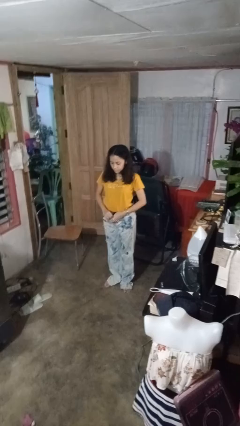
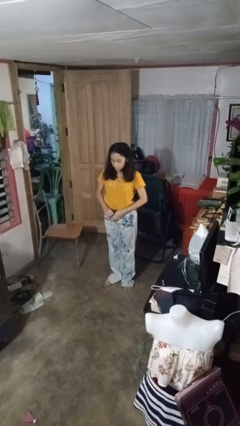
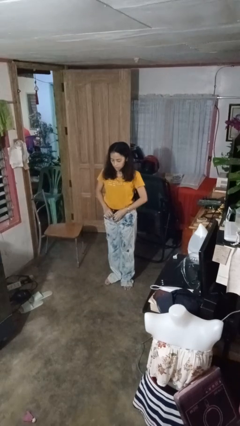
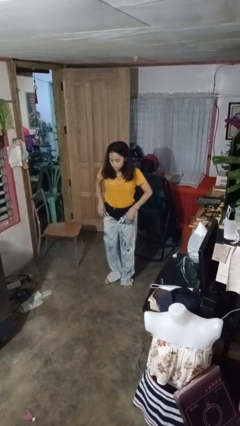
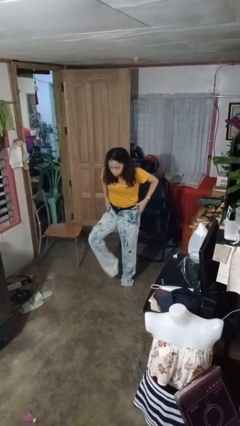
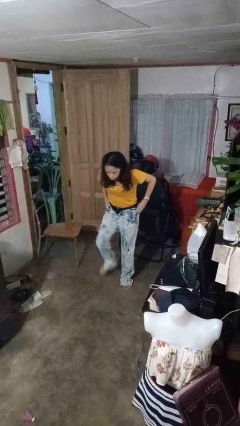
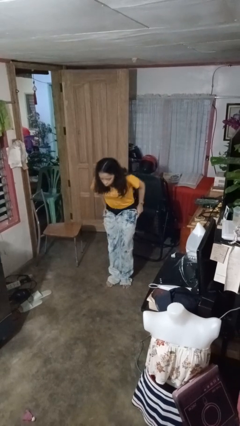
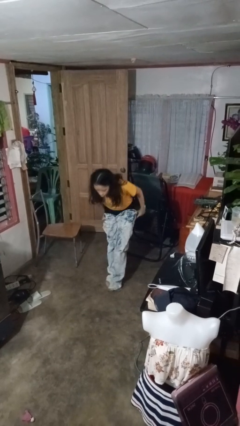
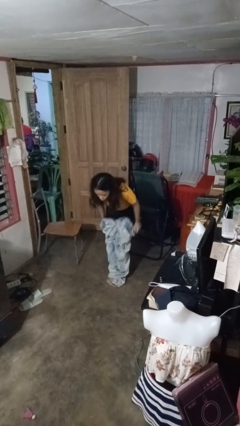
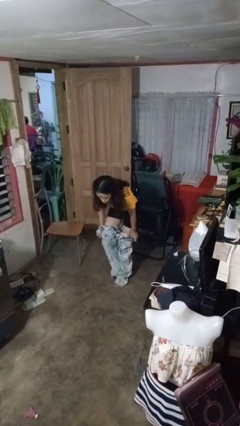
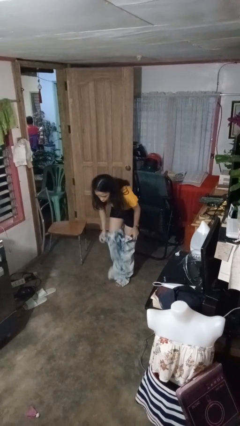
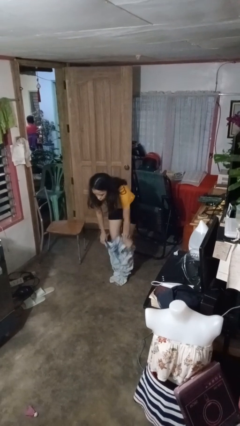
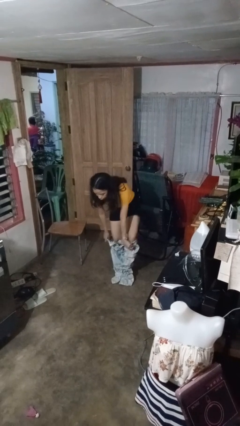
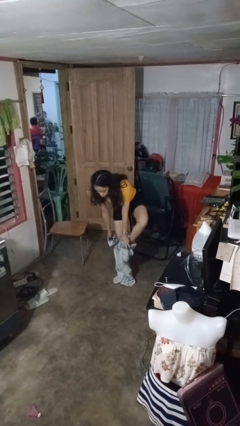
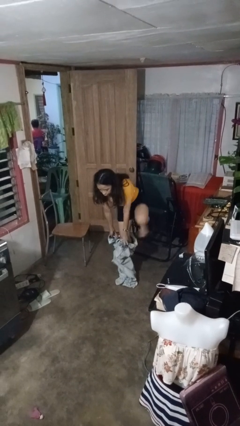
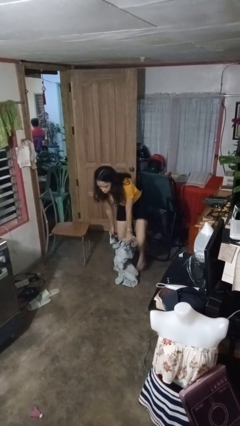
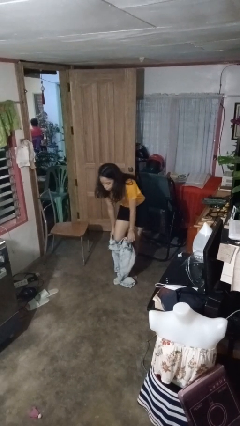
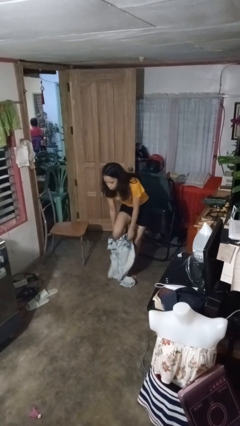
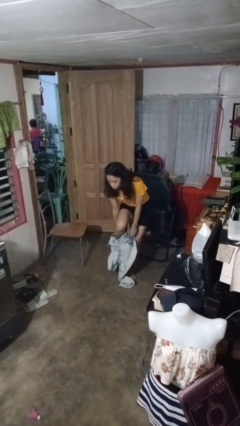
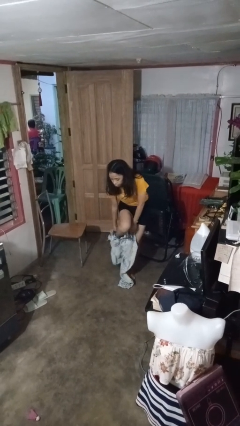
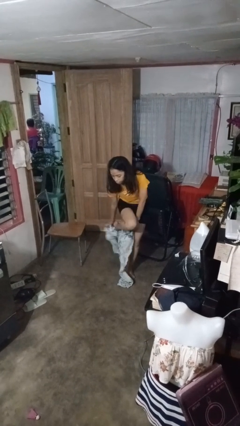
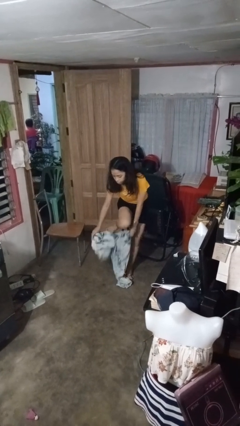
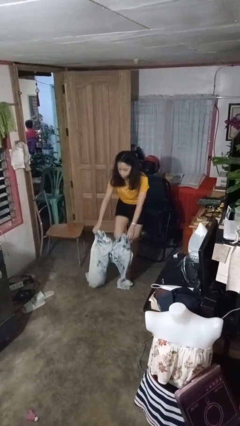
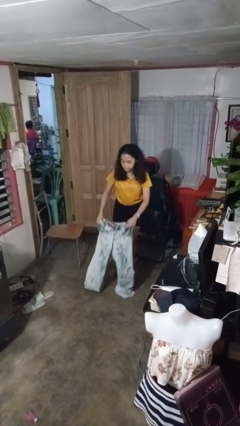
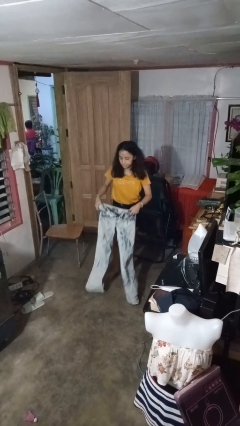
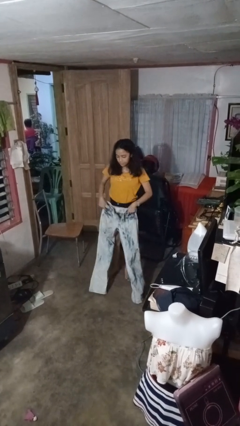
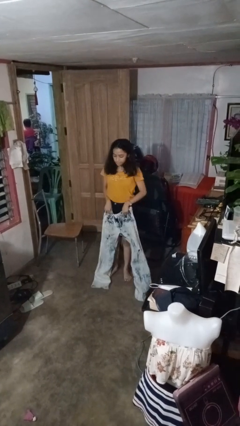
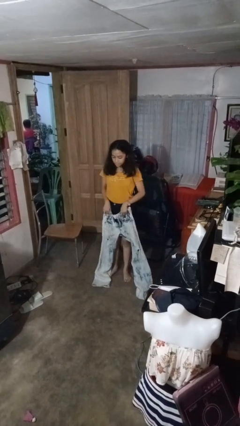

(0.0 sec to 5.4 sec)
person takes off pants

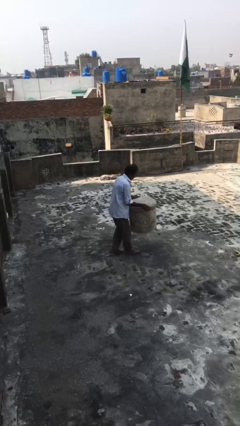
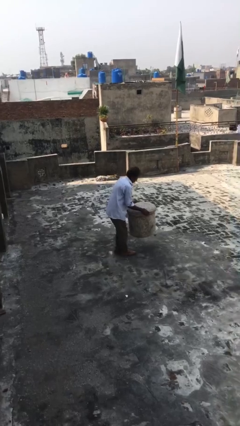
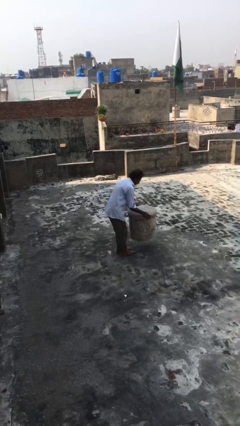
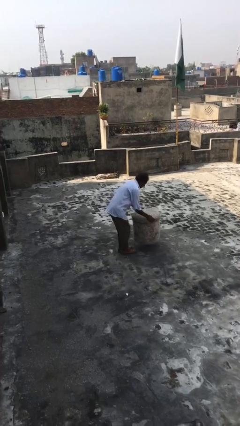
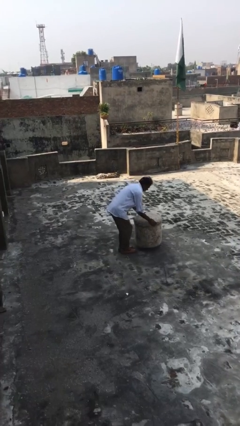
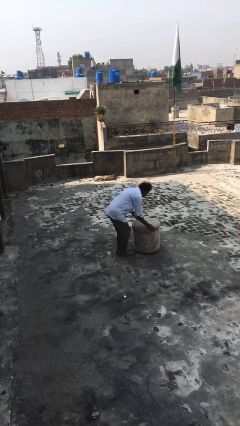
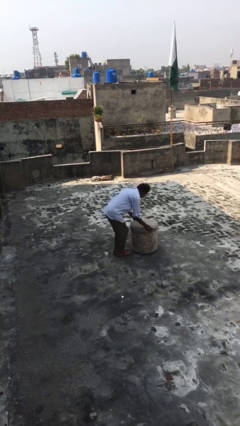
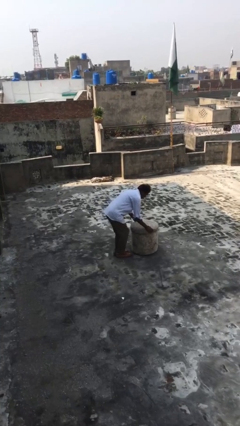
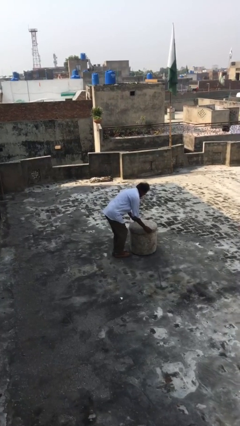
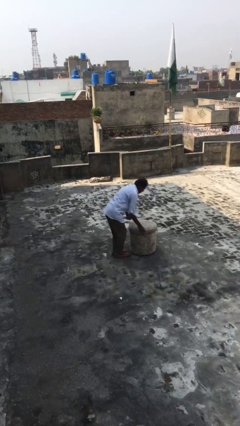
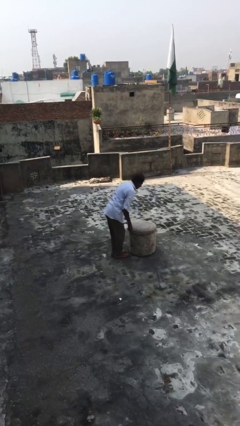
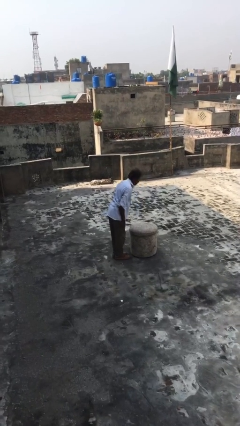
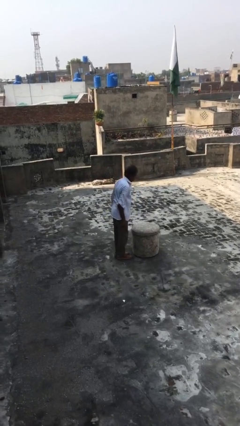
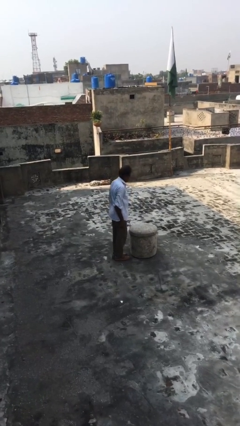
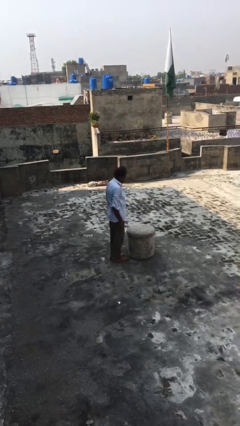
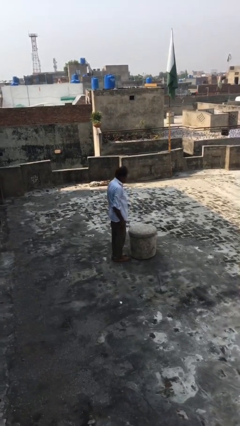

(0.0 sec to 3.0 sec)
person puts down object on floor

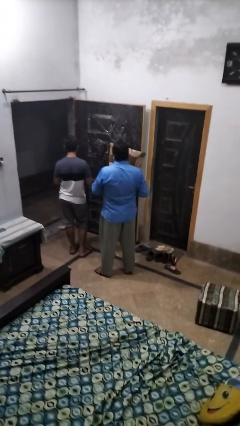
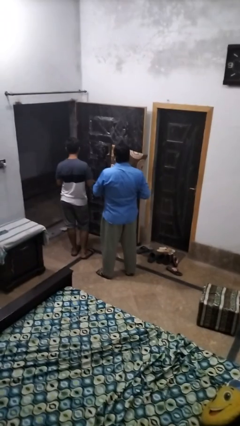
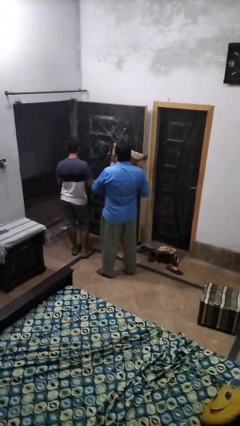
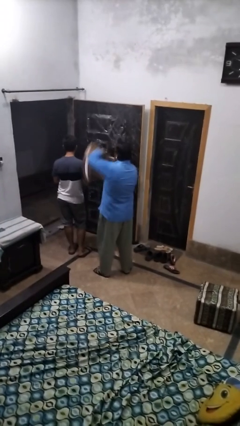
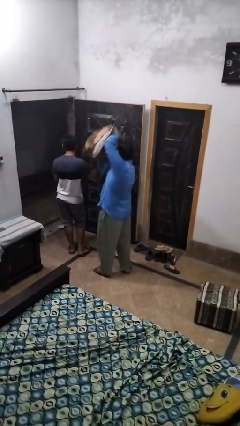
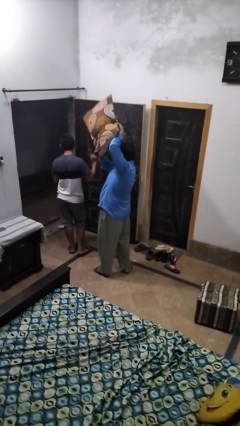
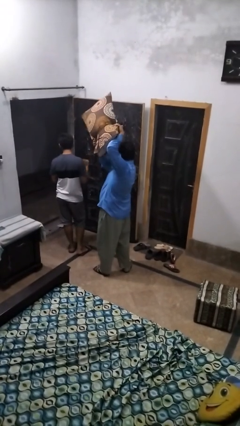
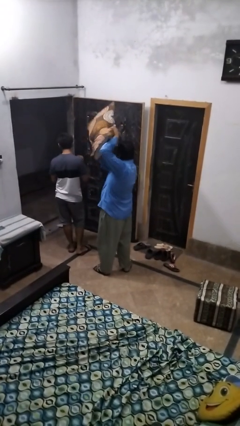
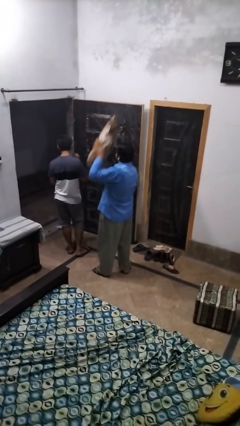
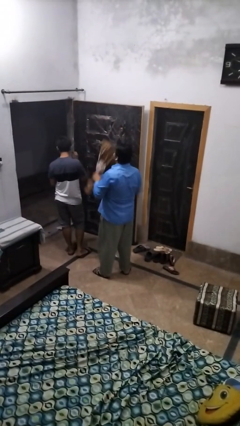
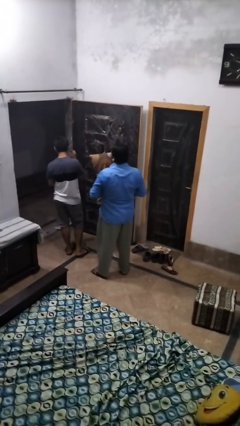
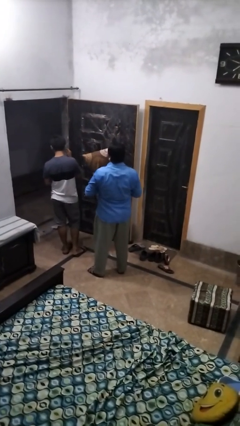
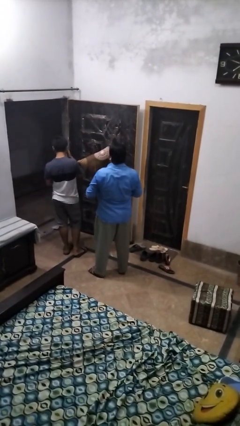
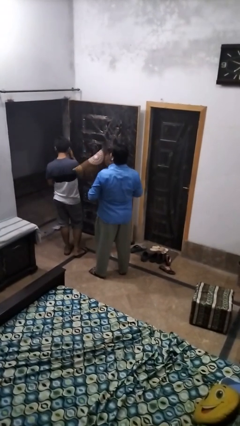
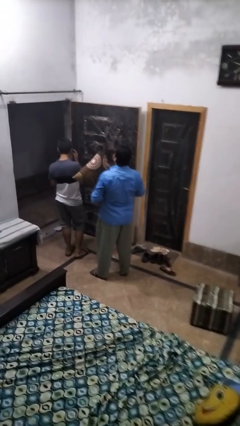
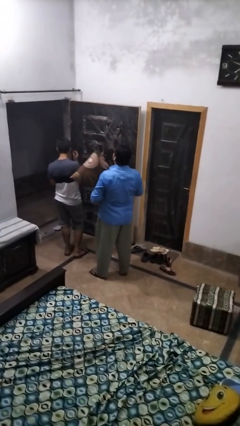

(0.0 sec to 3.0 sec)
person hits person with pillow

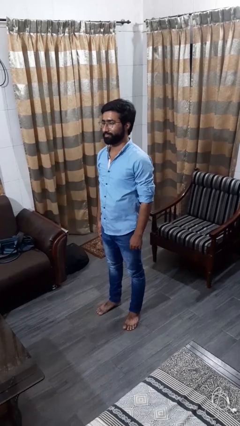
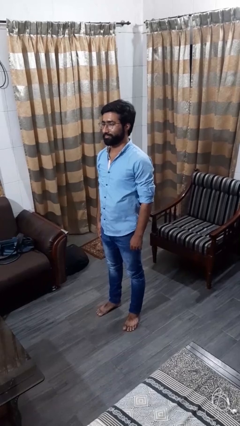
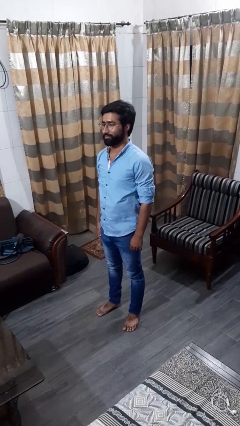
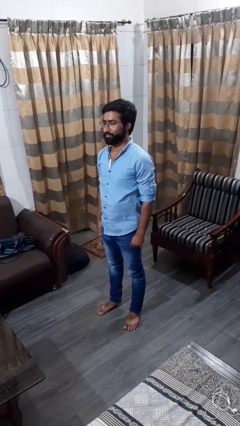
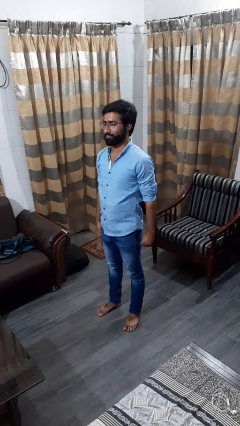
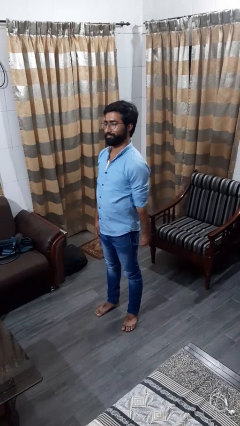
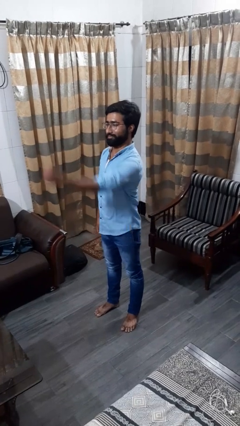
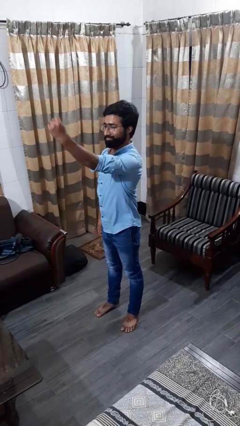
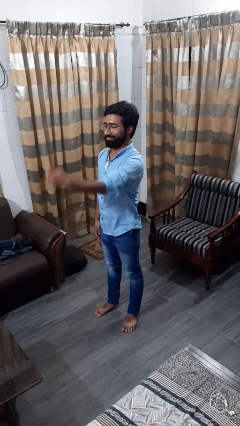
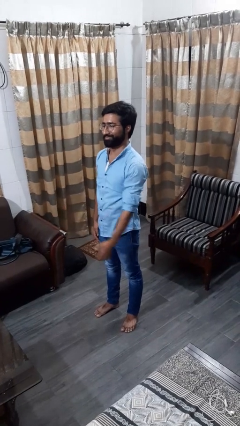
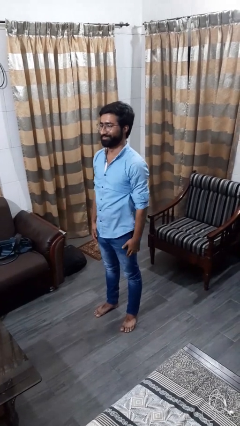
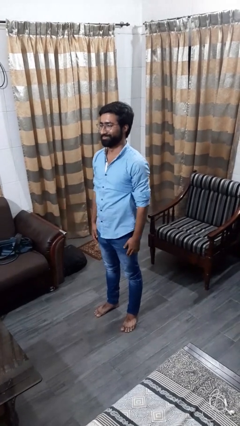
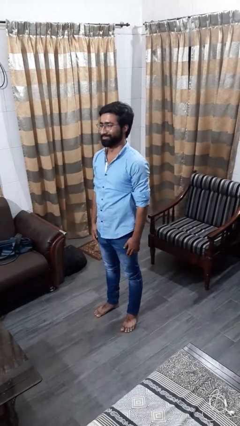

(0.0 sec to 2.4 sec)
person punches

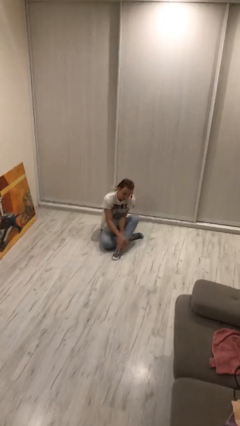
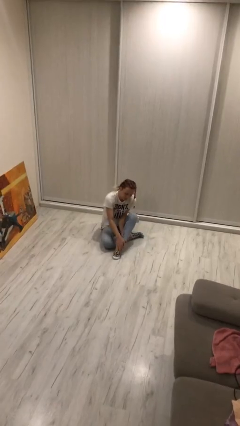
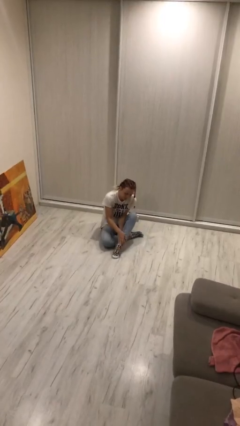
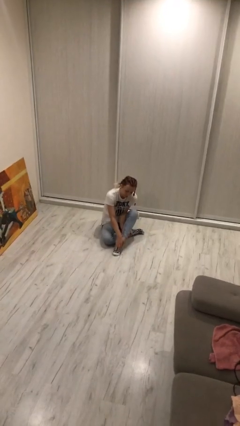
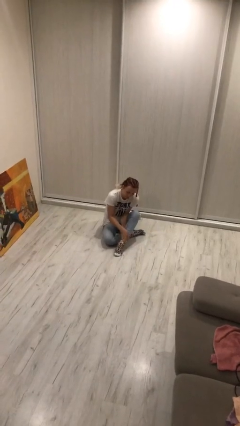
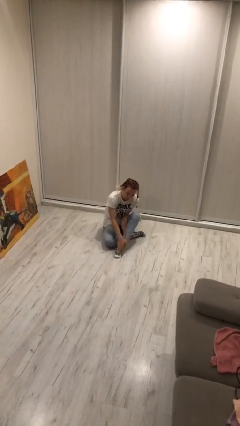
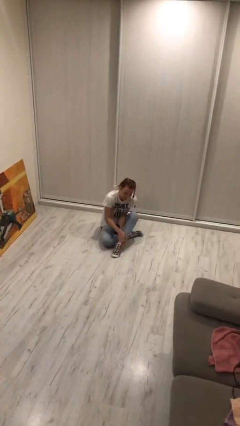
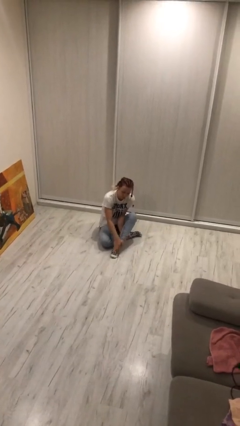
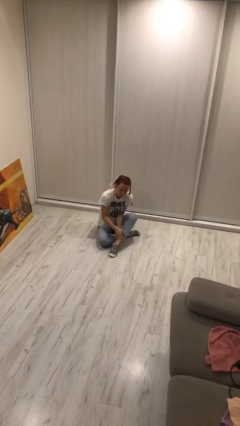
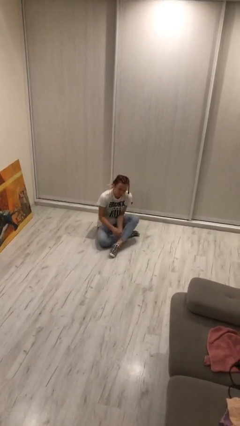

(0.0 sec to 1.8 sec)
person rubs foot

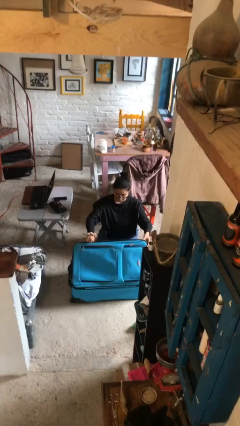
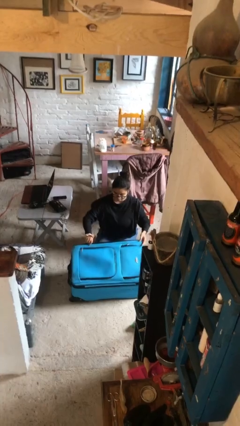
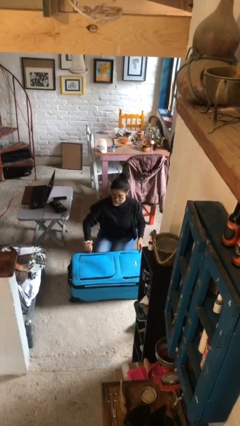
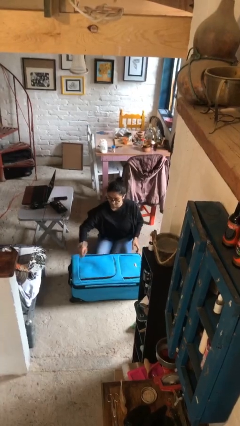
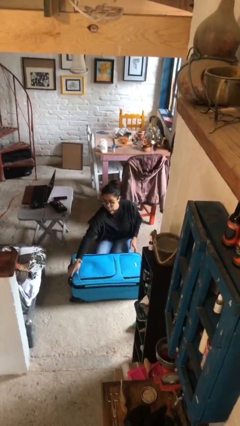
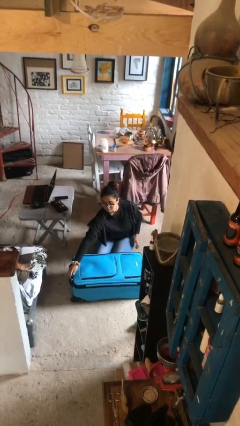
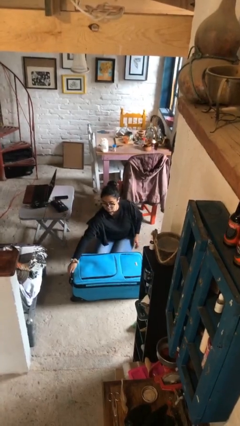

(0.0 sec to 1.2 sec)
person closes suitcase

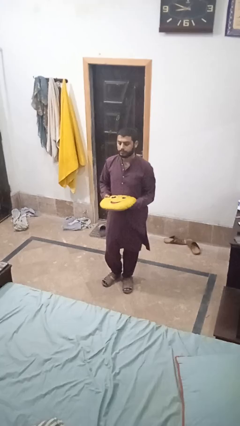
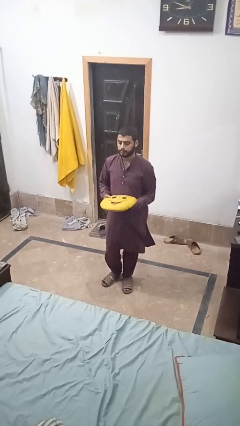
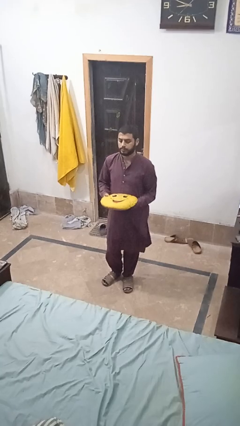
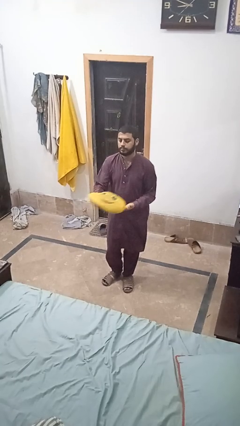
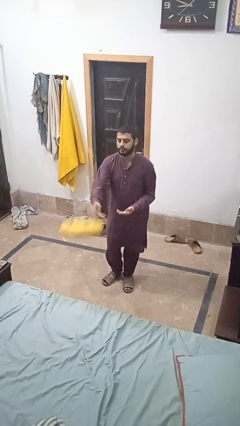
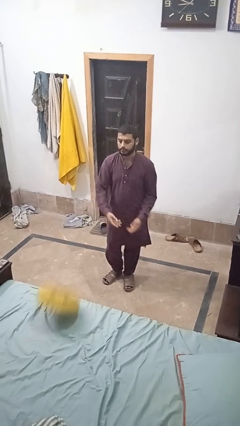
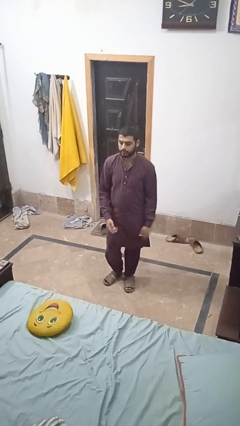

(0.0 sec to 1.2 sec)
person throws object on bed
